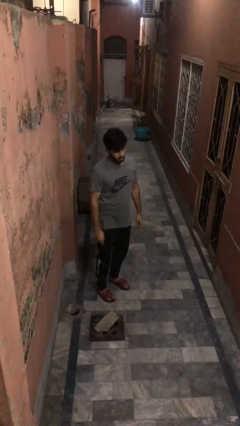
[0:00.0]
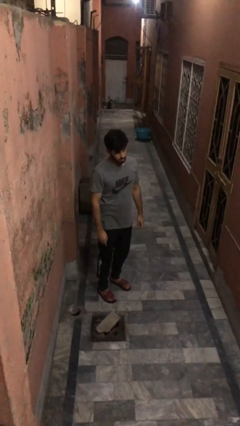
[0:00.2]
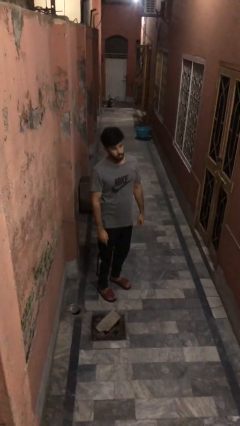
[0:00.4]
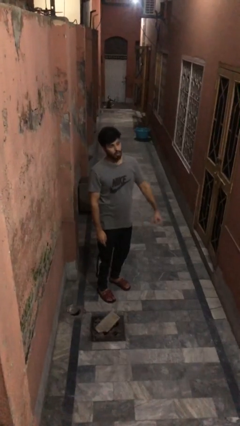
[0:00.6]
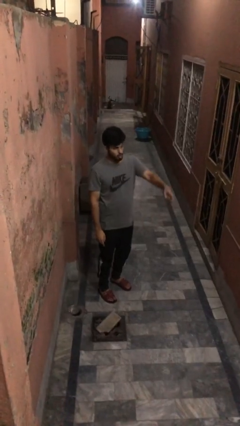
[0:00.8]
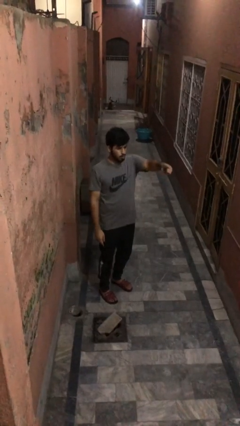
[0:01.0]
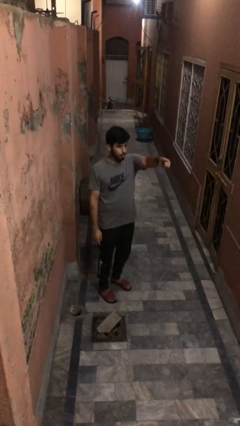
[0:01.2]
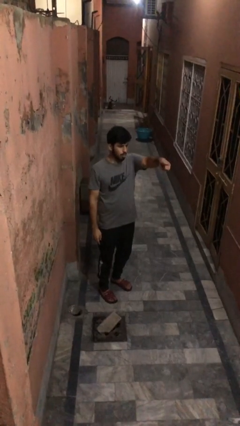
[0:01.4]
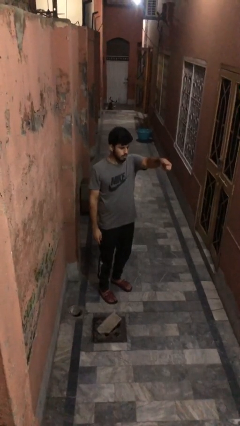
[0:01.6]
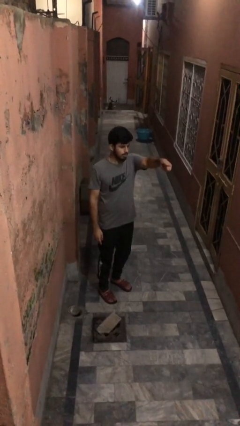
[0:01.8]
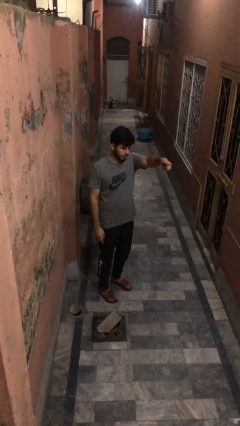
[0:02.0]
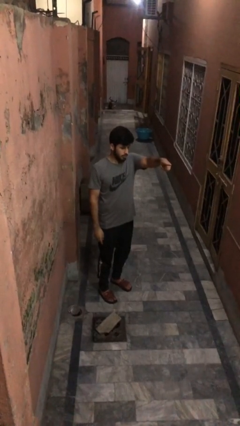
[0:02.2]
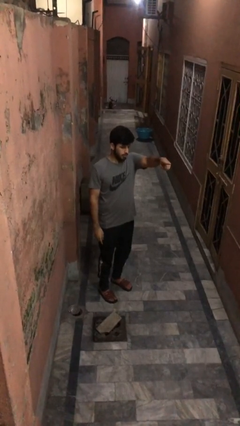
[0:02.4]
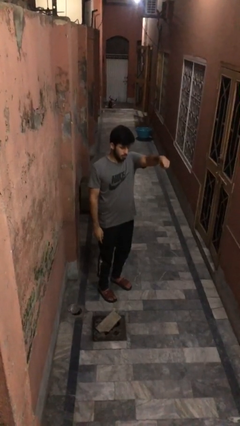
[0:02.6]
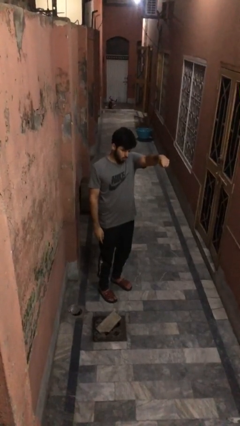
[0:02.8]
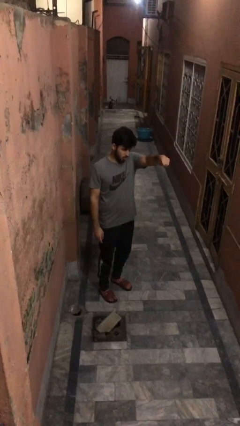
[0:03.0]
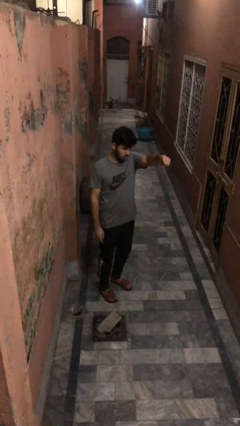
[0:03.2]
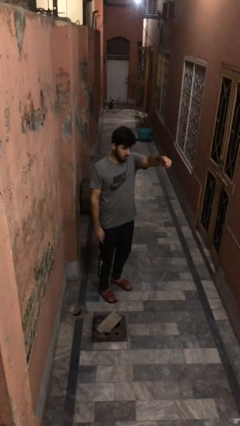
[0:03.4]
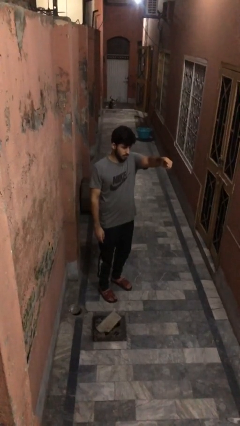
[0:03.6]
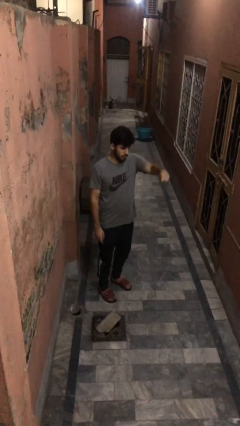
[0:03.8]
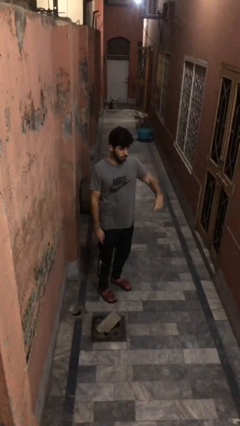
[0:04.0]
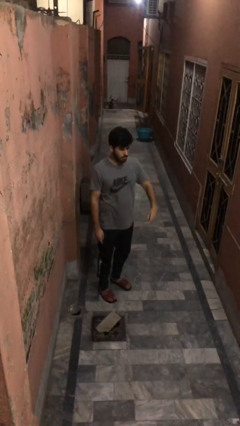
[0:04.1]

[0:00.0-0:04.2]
person points at person

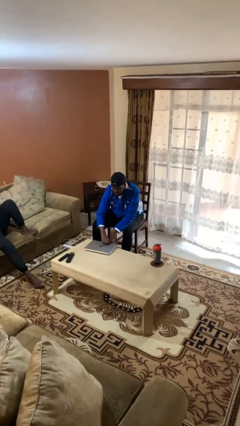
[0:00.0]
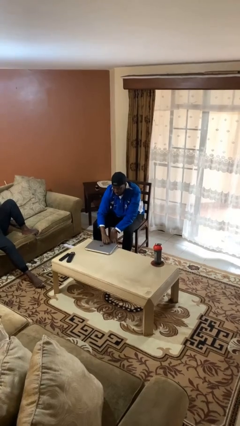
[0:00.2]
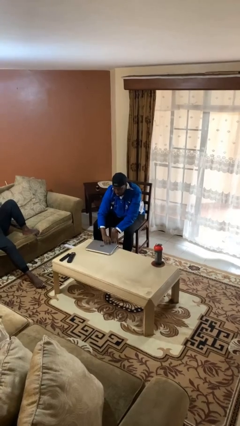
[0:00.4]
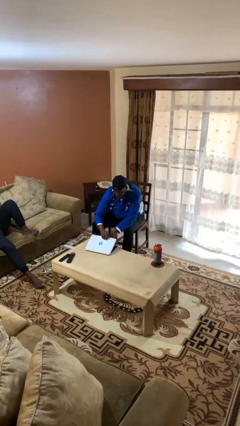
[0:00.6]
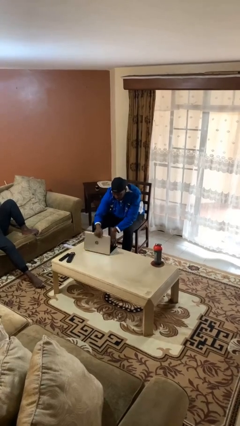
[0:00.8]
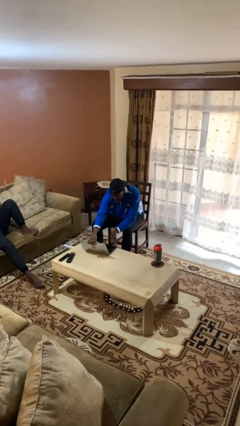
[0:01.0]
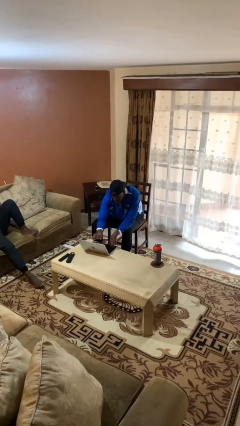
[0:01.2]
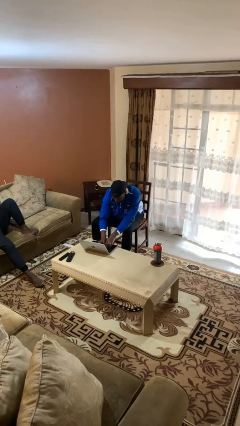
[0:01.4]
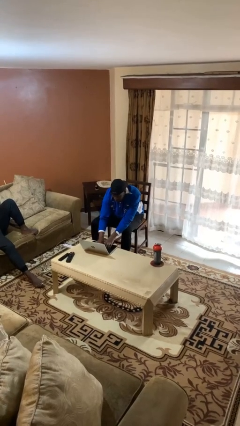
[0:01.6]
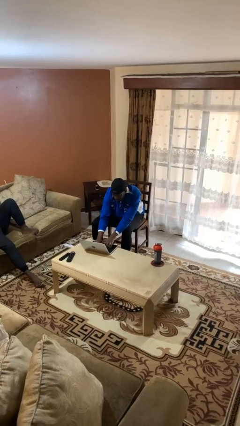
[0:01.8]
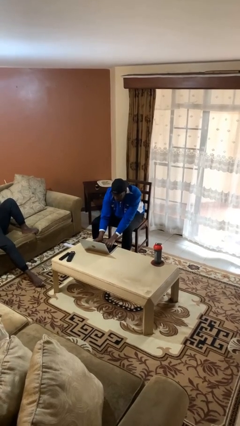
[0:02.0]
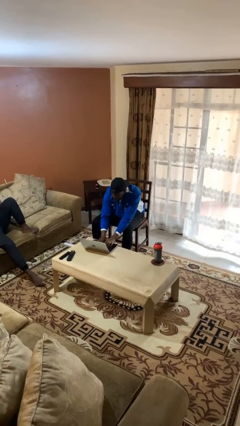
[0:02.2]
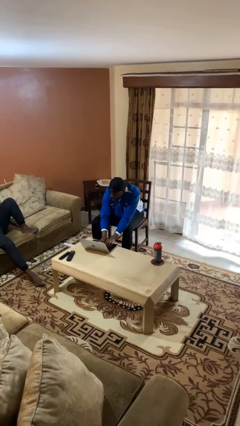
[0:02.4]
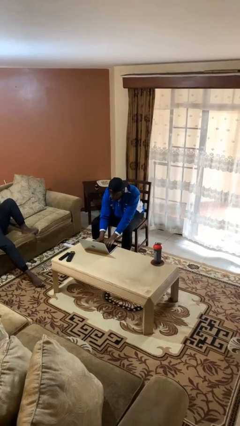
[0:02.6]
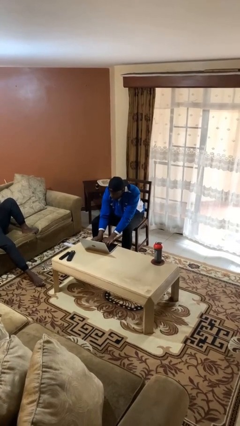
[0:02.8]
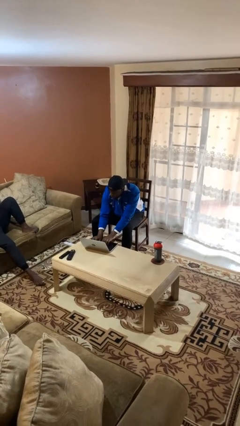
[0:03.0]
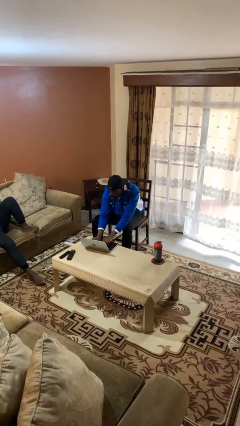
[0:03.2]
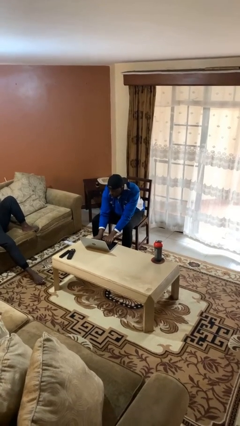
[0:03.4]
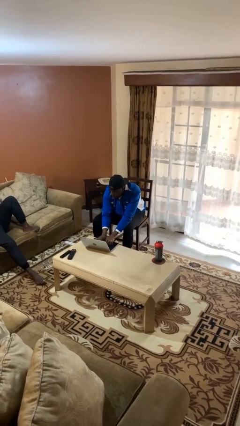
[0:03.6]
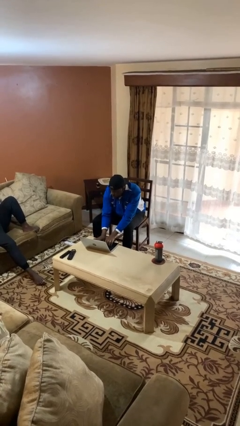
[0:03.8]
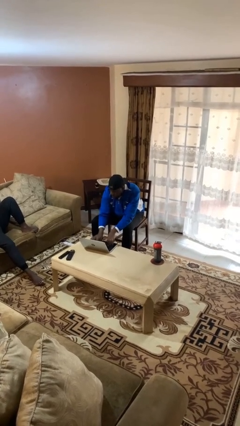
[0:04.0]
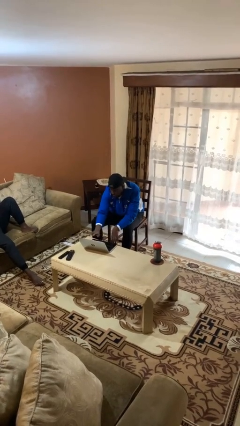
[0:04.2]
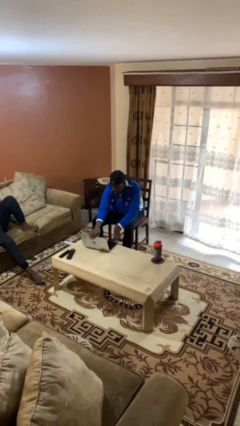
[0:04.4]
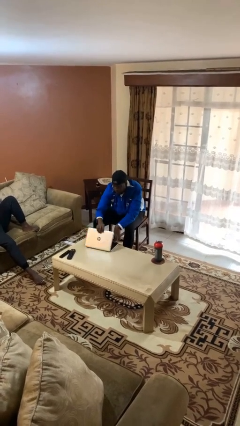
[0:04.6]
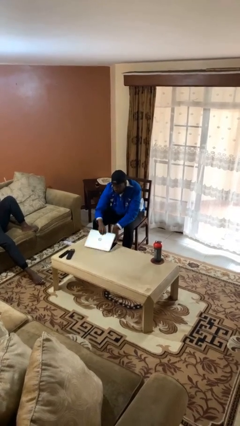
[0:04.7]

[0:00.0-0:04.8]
person interacts with laptop

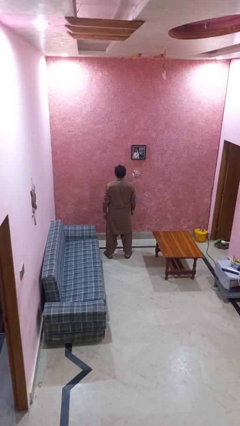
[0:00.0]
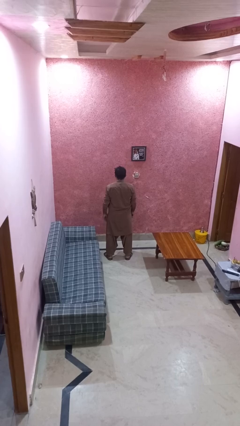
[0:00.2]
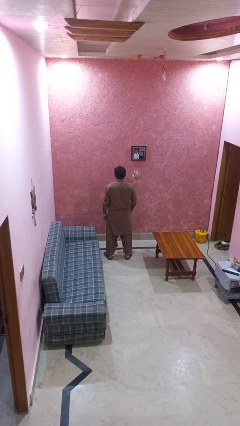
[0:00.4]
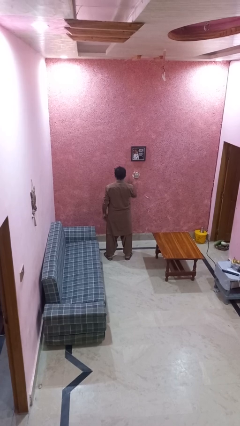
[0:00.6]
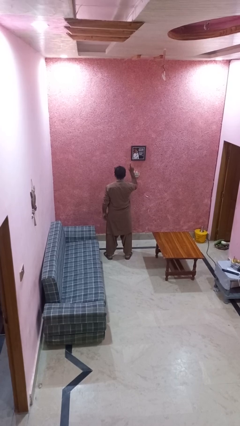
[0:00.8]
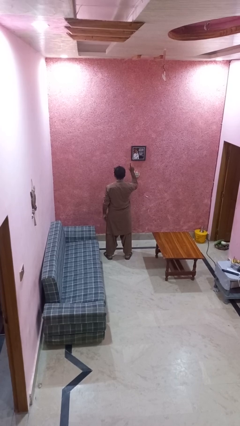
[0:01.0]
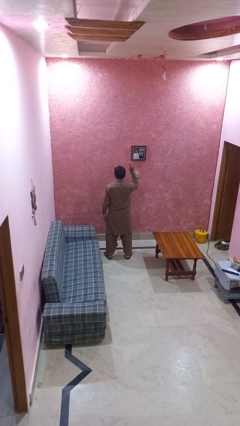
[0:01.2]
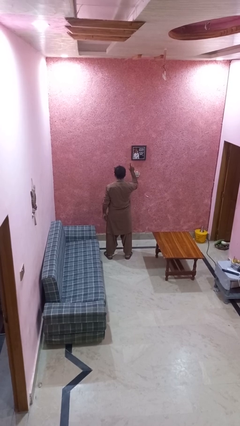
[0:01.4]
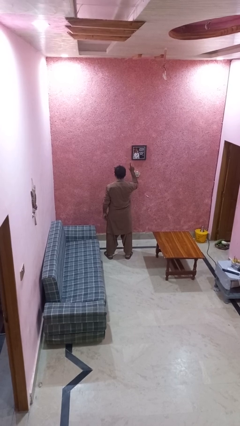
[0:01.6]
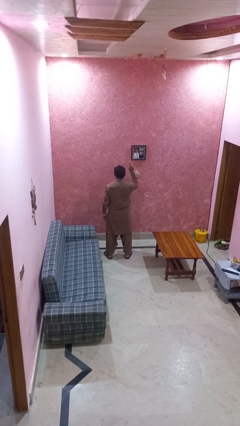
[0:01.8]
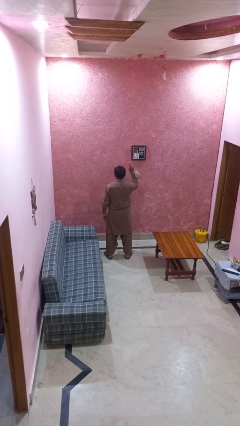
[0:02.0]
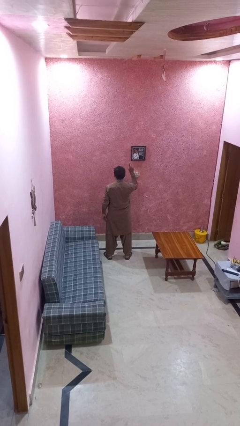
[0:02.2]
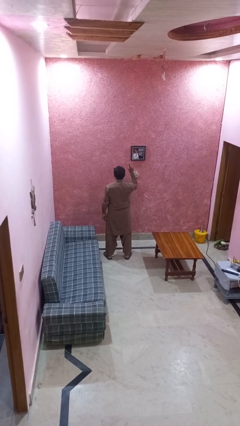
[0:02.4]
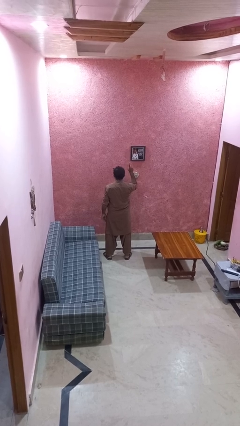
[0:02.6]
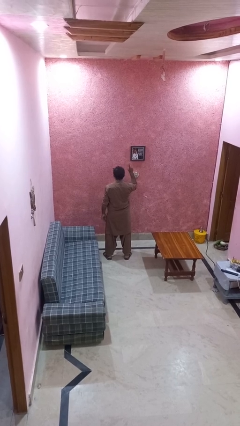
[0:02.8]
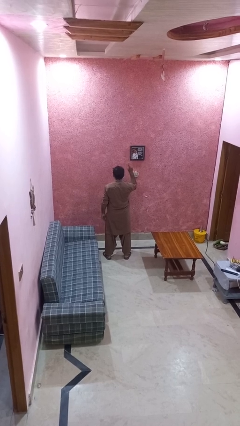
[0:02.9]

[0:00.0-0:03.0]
person gestures number one

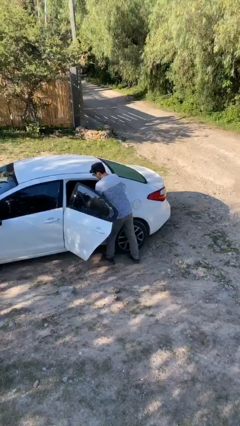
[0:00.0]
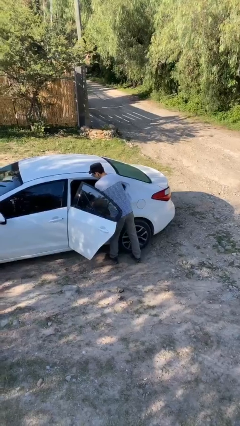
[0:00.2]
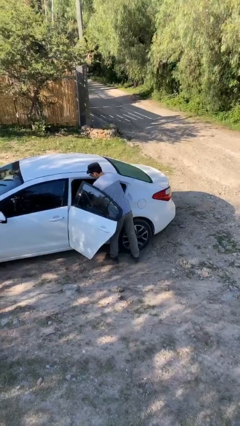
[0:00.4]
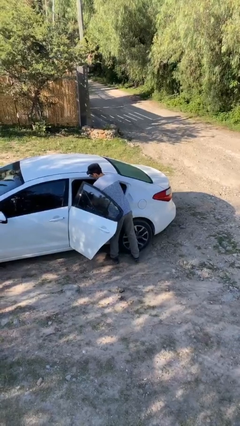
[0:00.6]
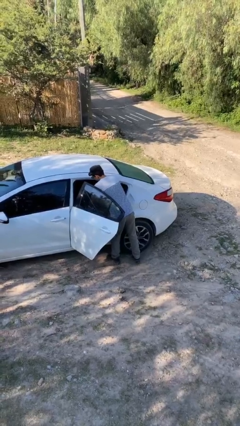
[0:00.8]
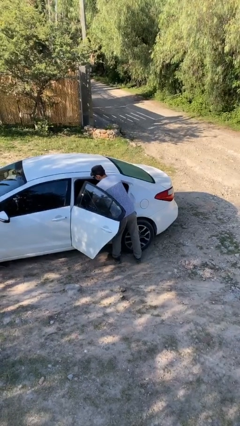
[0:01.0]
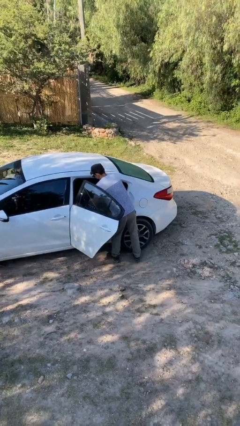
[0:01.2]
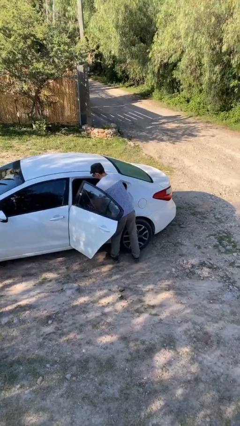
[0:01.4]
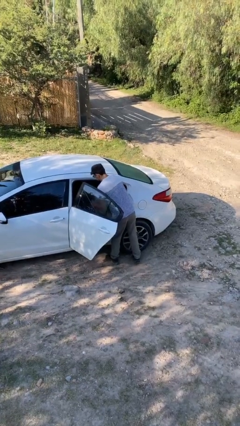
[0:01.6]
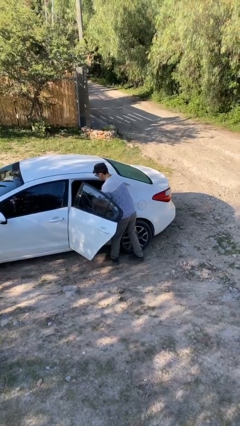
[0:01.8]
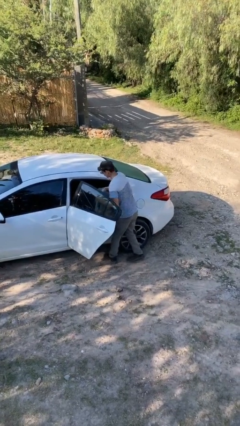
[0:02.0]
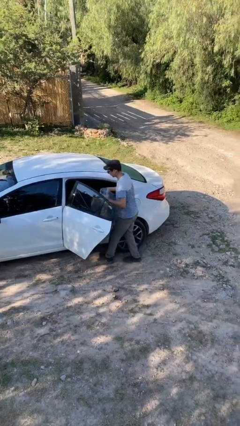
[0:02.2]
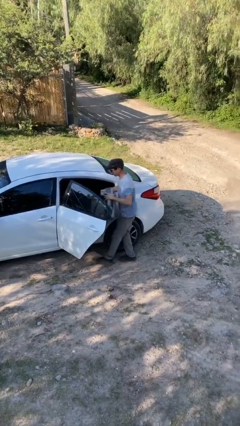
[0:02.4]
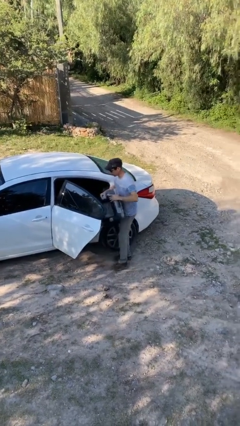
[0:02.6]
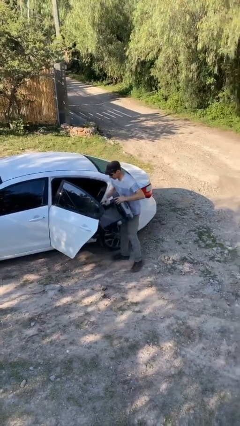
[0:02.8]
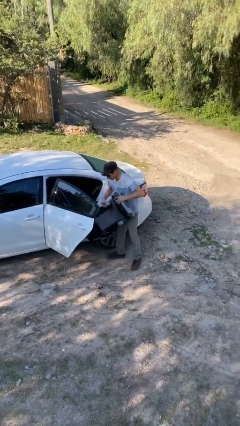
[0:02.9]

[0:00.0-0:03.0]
person unloads car

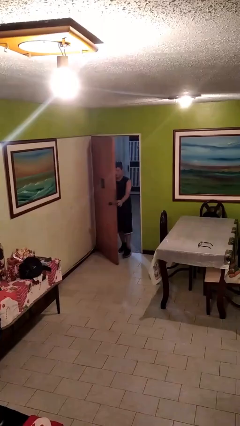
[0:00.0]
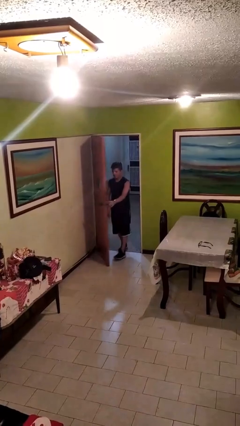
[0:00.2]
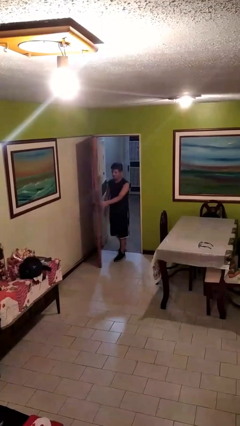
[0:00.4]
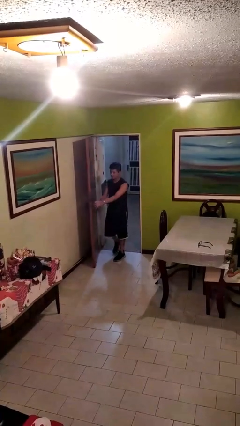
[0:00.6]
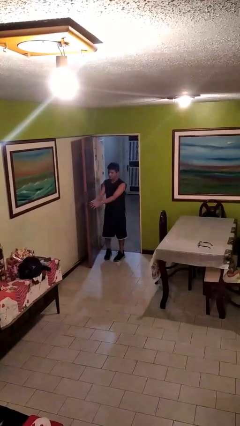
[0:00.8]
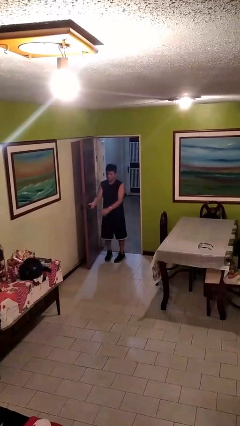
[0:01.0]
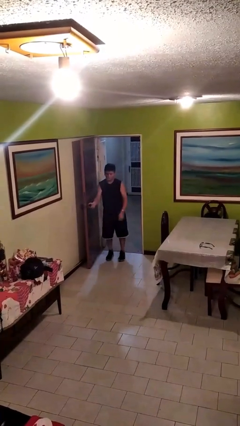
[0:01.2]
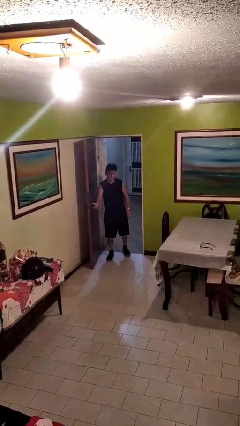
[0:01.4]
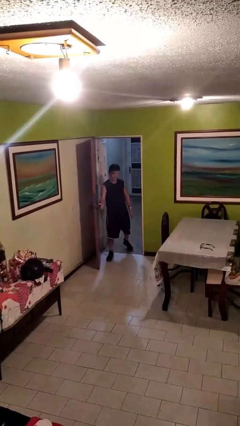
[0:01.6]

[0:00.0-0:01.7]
person opens facility door

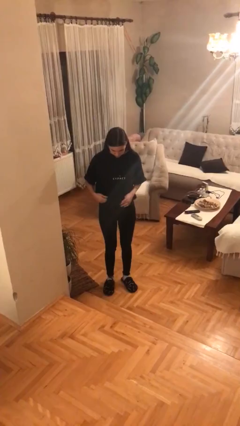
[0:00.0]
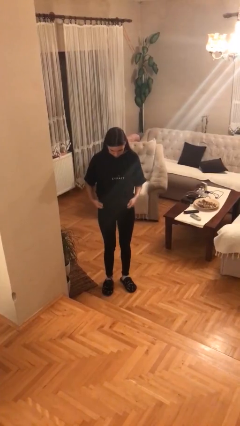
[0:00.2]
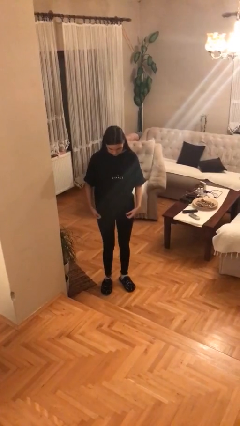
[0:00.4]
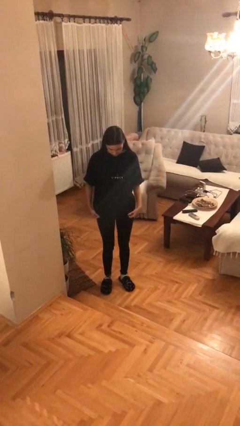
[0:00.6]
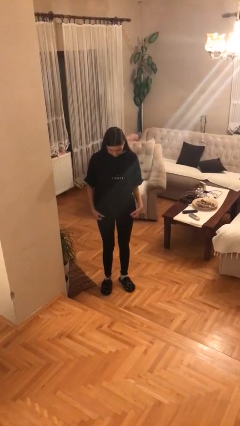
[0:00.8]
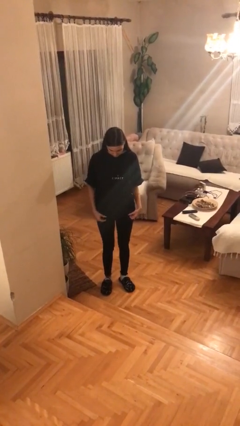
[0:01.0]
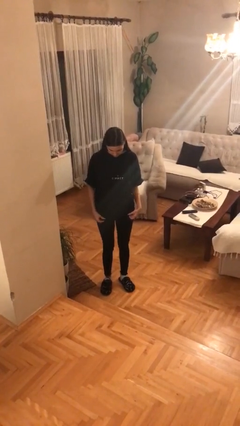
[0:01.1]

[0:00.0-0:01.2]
person untucks shirt
